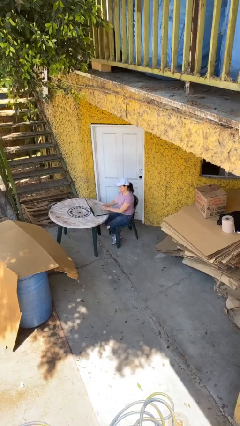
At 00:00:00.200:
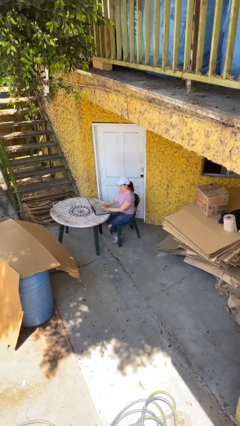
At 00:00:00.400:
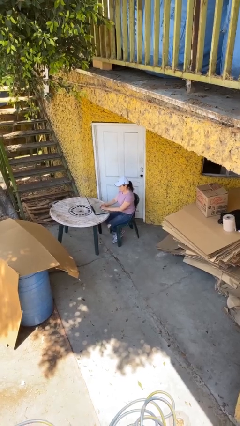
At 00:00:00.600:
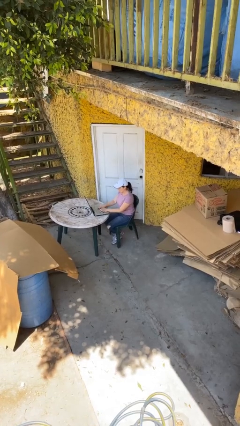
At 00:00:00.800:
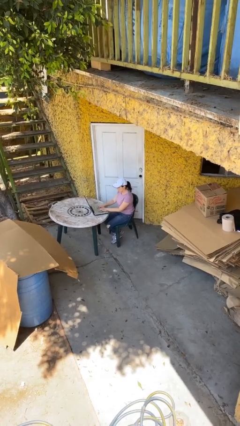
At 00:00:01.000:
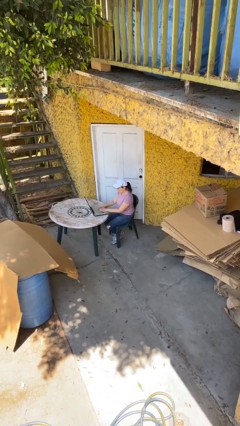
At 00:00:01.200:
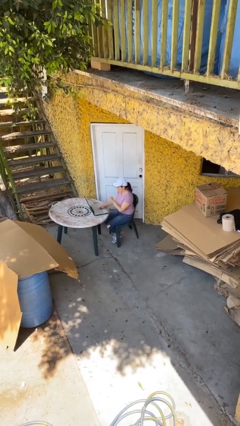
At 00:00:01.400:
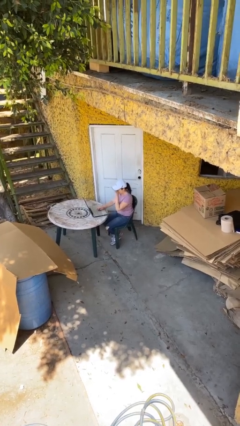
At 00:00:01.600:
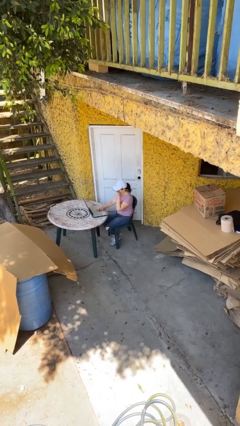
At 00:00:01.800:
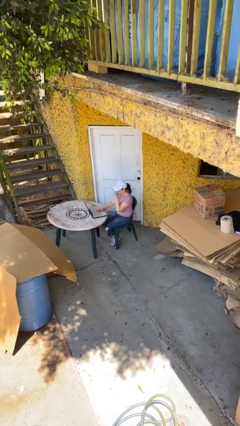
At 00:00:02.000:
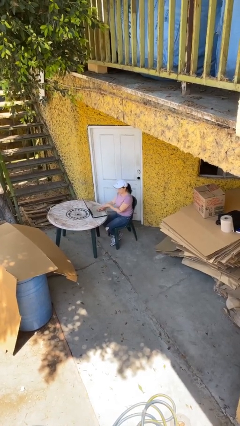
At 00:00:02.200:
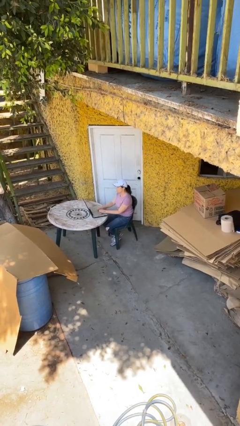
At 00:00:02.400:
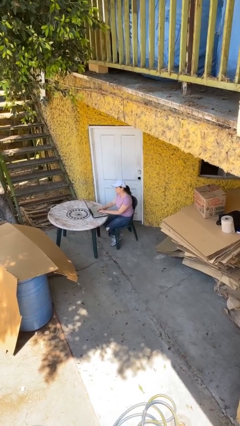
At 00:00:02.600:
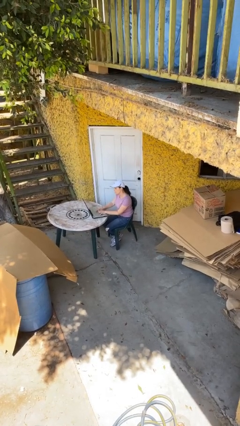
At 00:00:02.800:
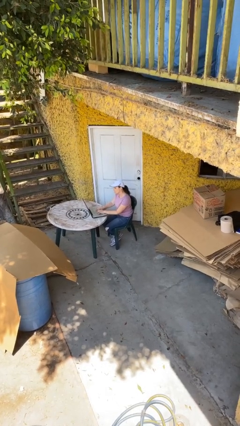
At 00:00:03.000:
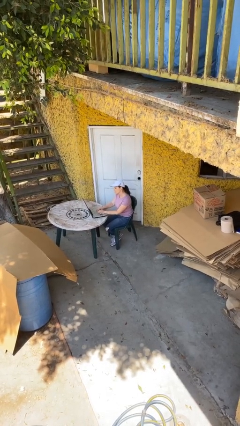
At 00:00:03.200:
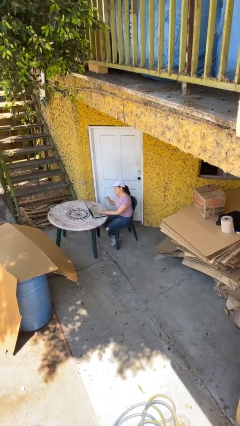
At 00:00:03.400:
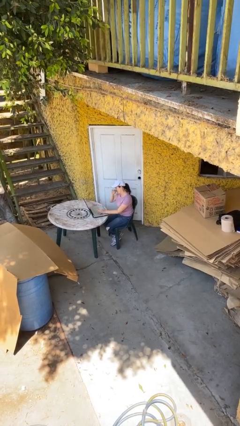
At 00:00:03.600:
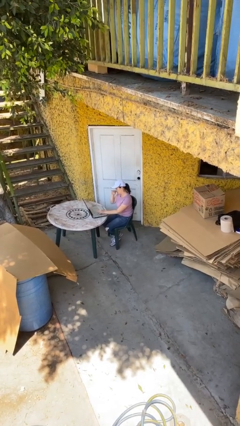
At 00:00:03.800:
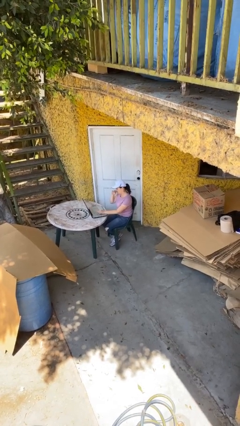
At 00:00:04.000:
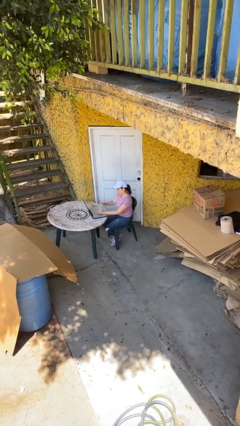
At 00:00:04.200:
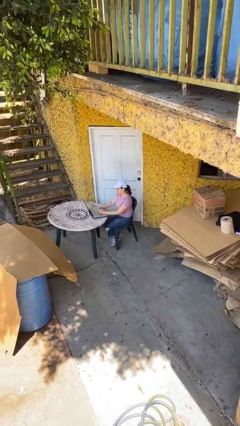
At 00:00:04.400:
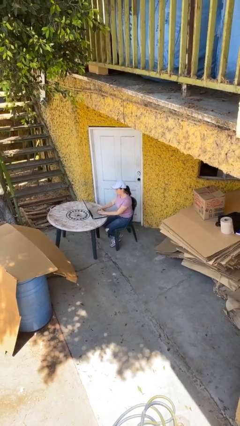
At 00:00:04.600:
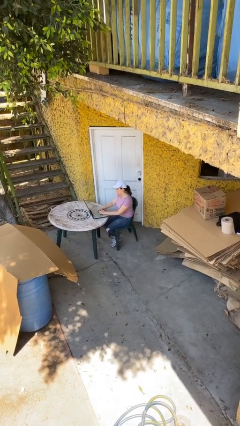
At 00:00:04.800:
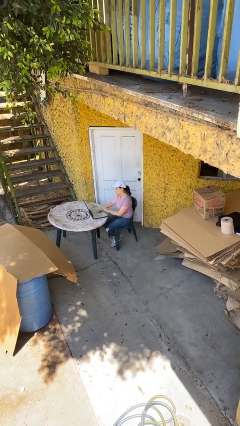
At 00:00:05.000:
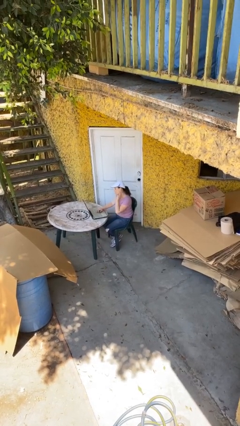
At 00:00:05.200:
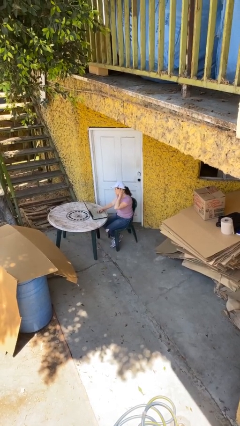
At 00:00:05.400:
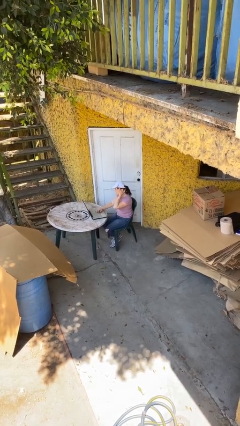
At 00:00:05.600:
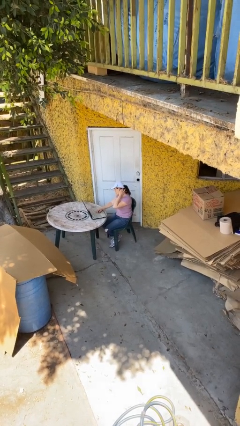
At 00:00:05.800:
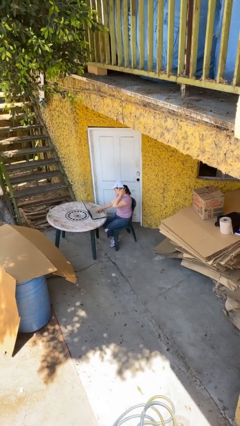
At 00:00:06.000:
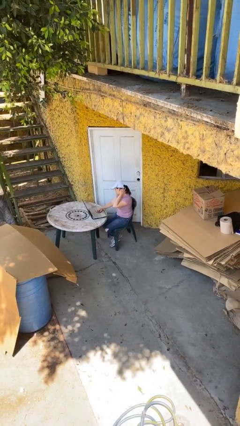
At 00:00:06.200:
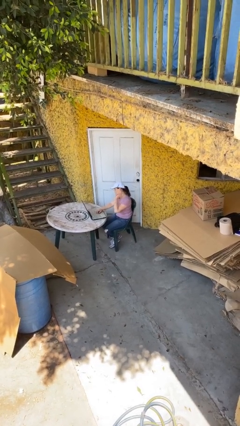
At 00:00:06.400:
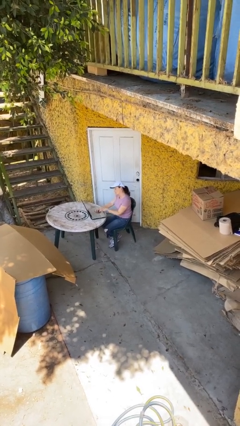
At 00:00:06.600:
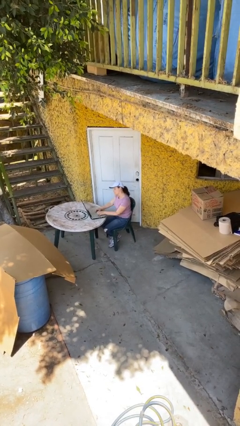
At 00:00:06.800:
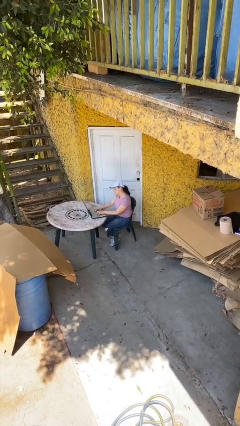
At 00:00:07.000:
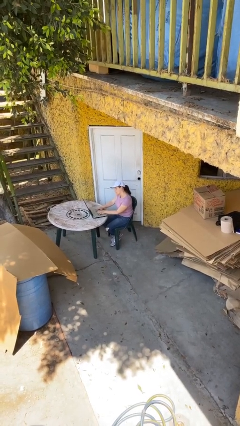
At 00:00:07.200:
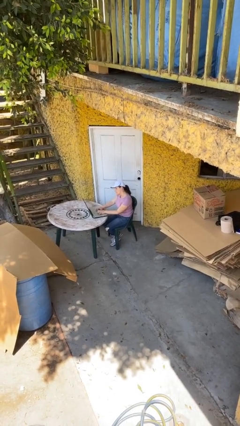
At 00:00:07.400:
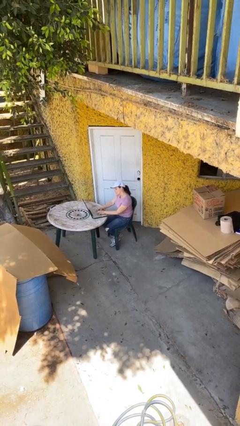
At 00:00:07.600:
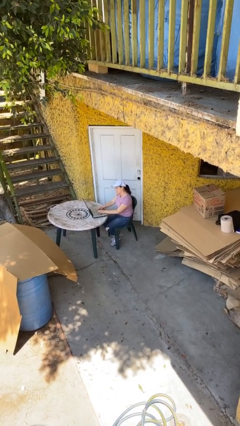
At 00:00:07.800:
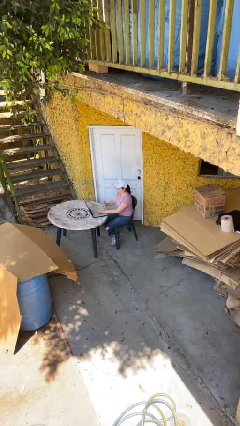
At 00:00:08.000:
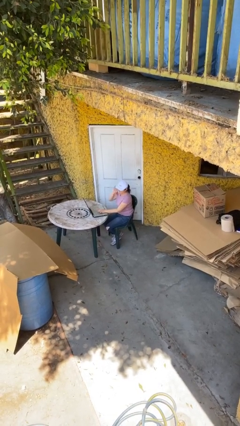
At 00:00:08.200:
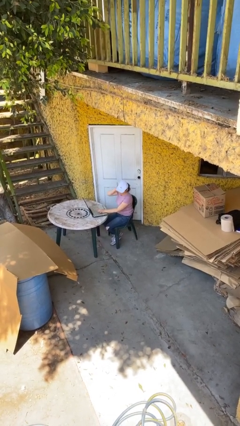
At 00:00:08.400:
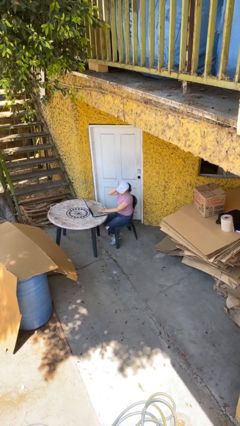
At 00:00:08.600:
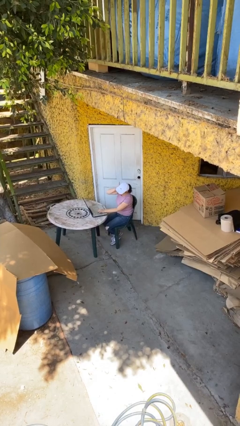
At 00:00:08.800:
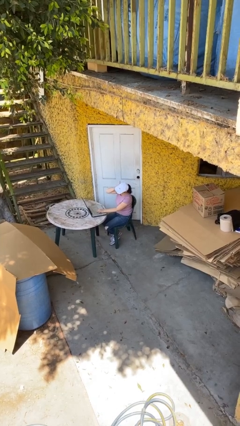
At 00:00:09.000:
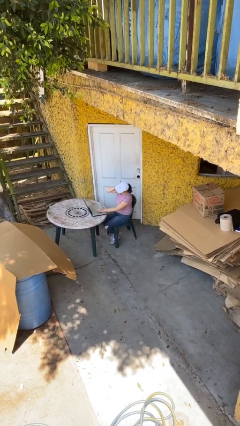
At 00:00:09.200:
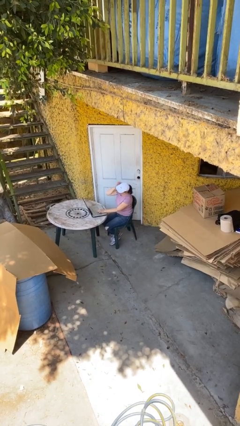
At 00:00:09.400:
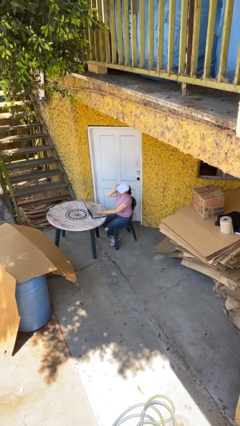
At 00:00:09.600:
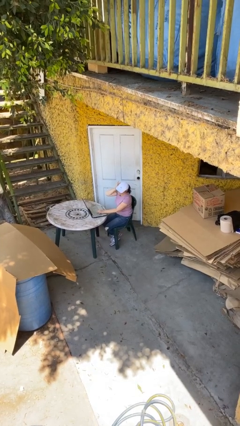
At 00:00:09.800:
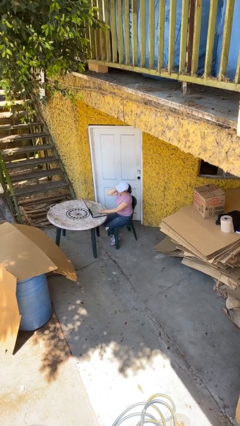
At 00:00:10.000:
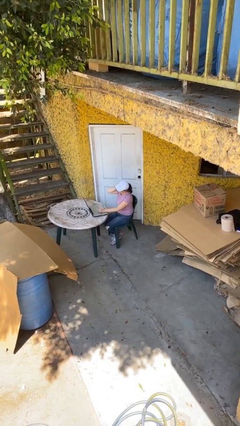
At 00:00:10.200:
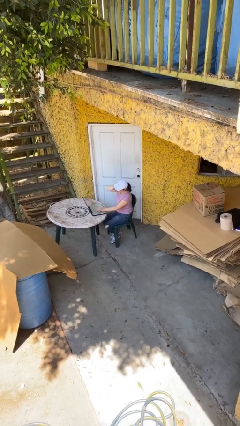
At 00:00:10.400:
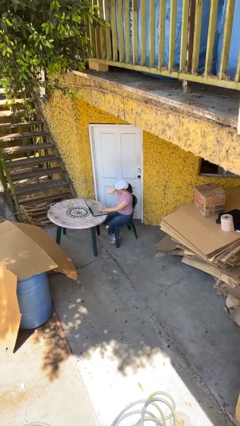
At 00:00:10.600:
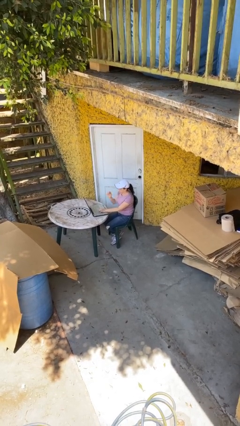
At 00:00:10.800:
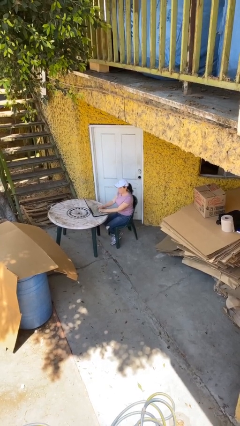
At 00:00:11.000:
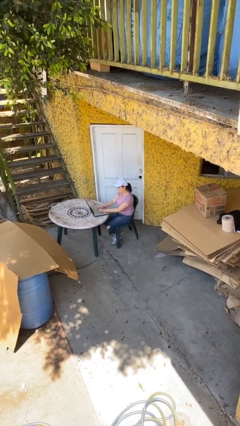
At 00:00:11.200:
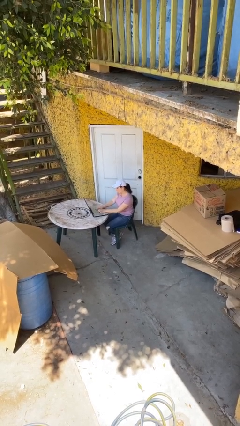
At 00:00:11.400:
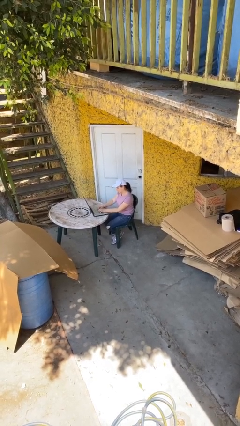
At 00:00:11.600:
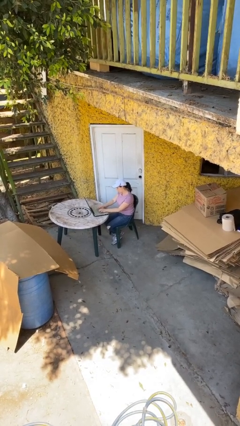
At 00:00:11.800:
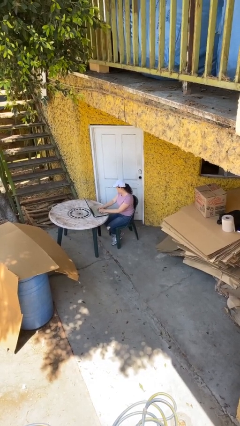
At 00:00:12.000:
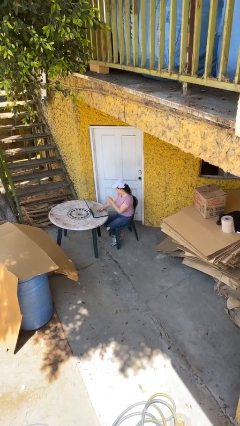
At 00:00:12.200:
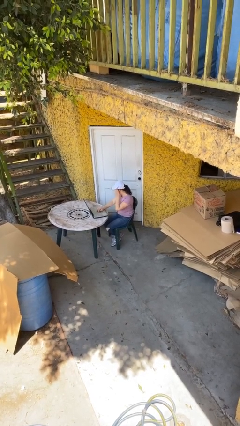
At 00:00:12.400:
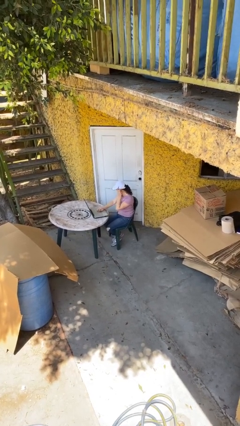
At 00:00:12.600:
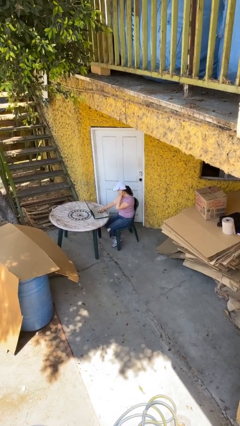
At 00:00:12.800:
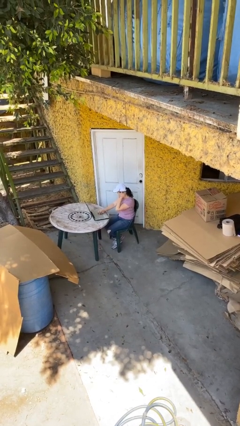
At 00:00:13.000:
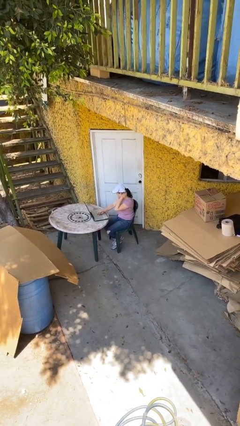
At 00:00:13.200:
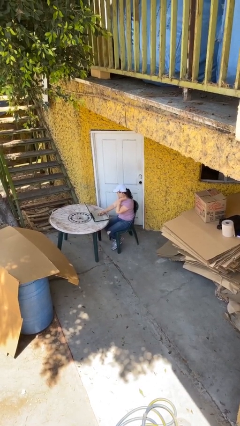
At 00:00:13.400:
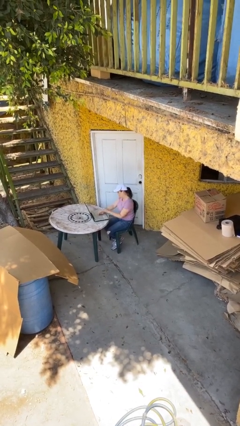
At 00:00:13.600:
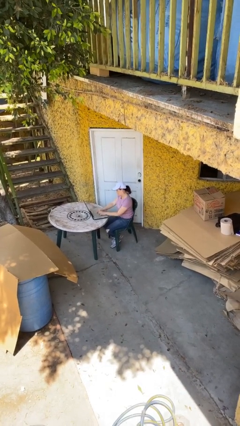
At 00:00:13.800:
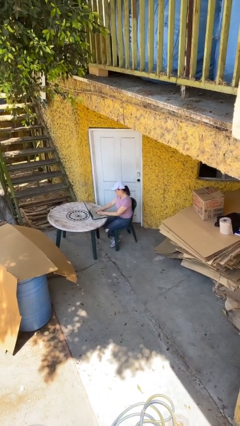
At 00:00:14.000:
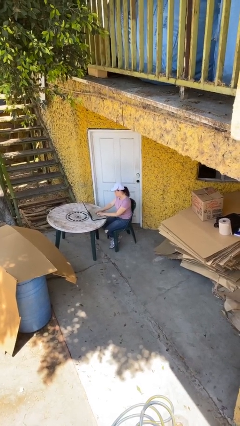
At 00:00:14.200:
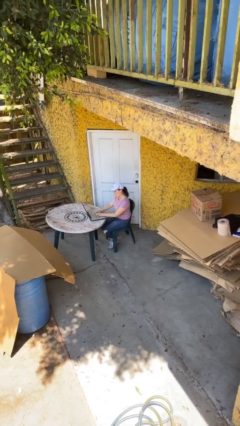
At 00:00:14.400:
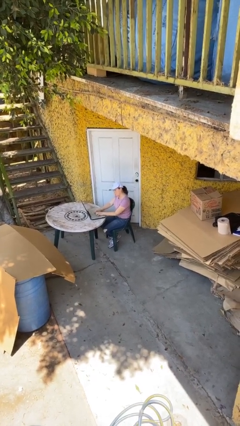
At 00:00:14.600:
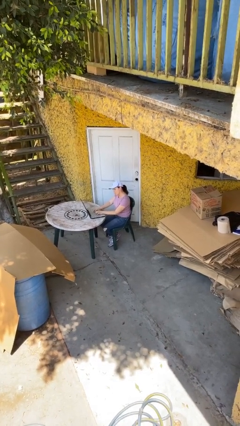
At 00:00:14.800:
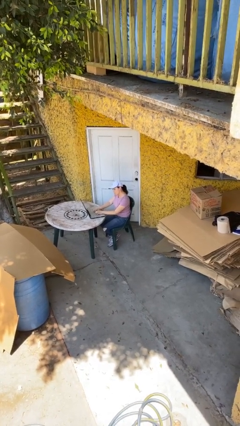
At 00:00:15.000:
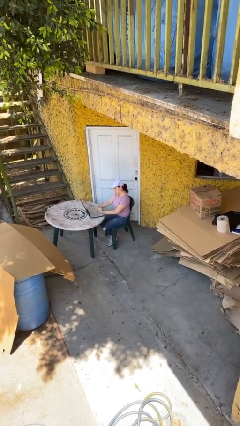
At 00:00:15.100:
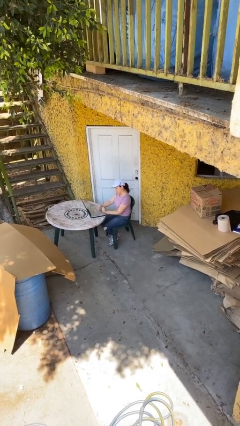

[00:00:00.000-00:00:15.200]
person interacts with laptop

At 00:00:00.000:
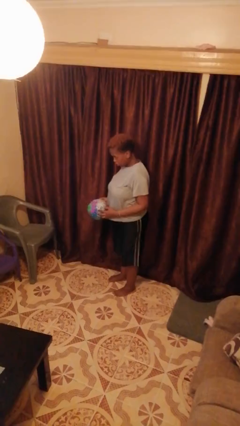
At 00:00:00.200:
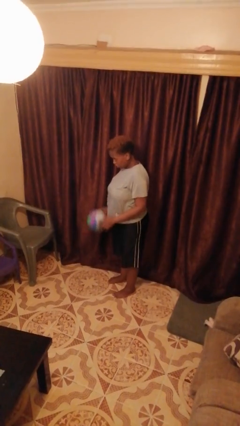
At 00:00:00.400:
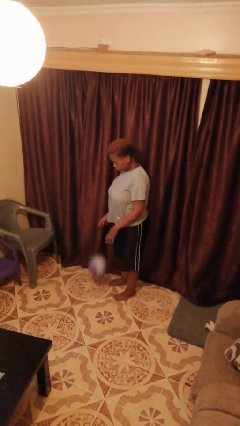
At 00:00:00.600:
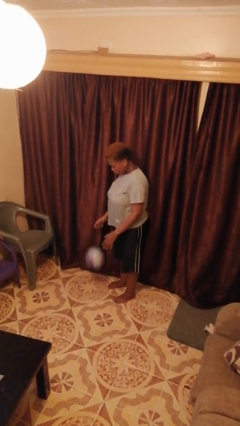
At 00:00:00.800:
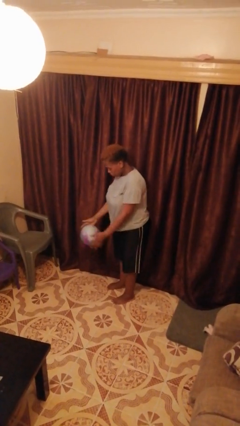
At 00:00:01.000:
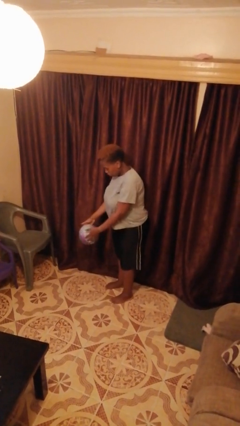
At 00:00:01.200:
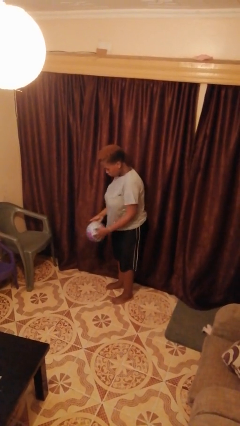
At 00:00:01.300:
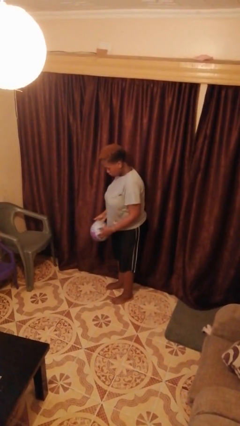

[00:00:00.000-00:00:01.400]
person bounces ball on floor

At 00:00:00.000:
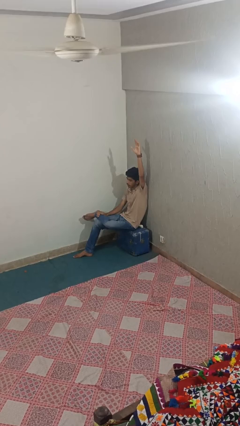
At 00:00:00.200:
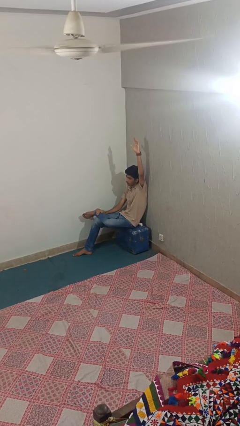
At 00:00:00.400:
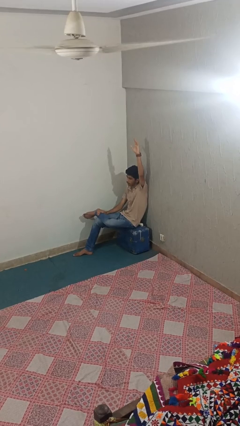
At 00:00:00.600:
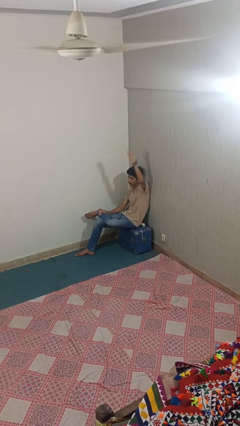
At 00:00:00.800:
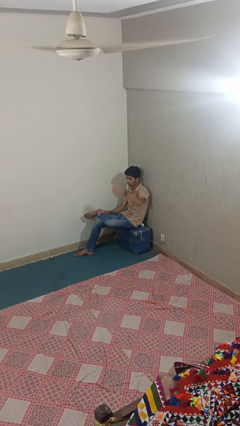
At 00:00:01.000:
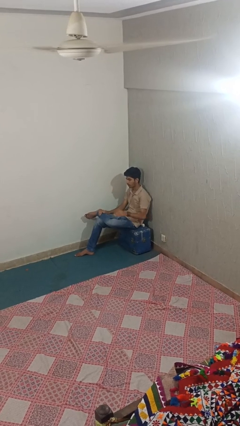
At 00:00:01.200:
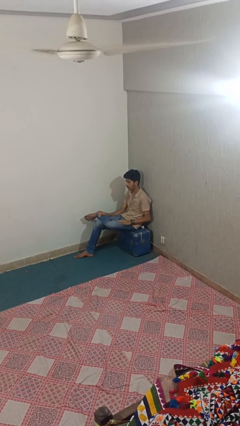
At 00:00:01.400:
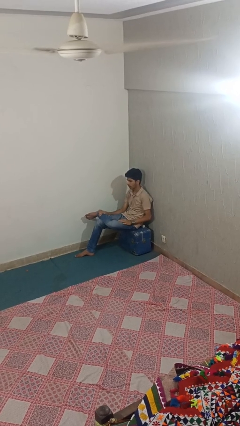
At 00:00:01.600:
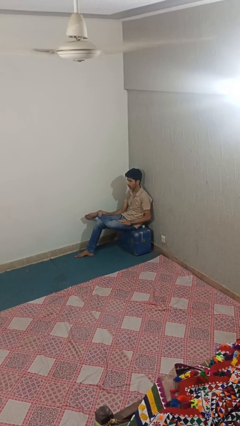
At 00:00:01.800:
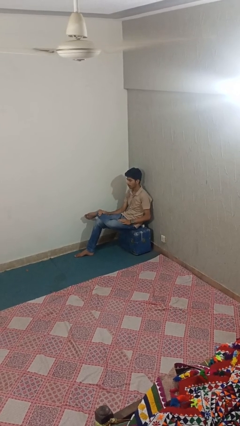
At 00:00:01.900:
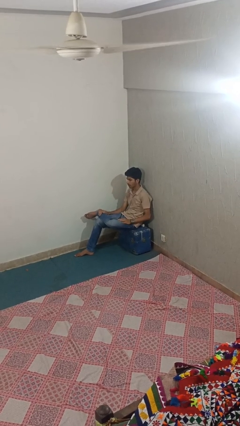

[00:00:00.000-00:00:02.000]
person gestures lower hand
